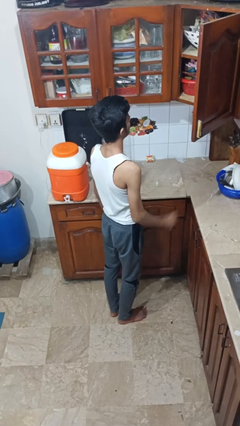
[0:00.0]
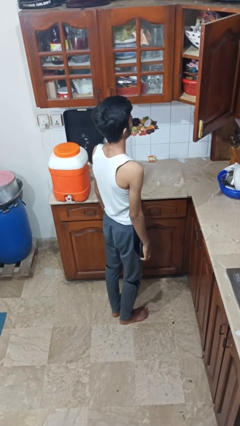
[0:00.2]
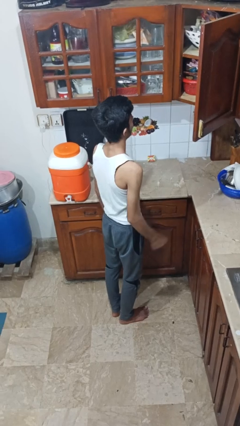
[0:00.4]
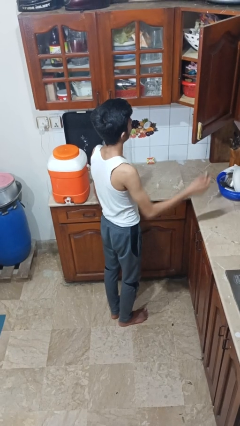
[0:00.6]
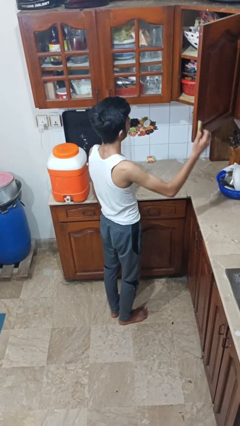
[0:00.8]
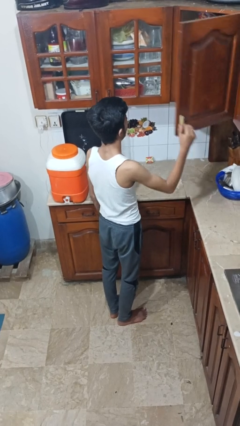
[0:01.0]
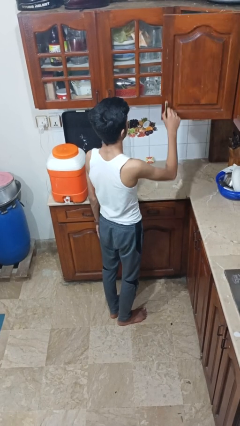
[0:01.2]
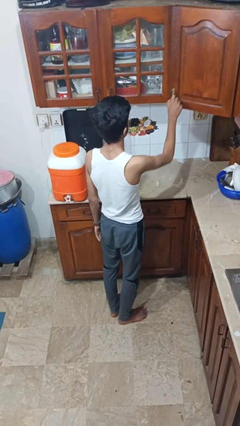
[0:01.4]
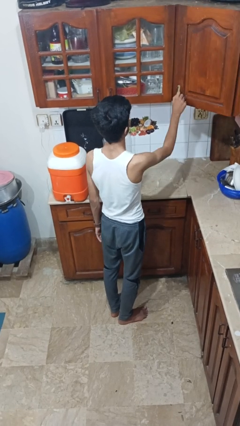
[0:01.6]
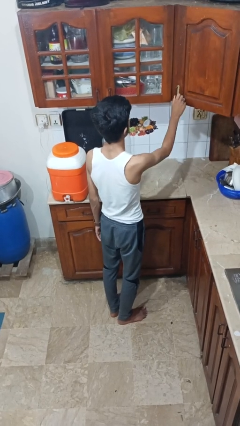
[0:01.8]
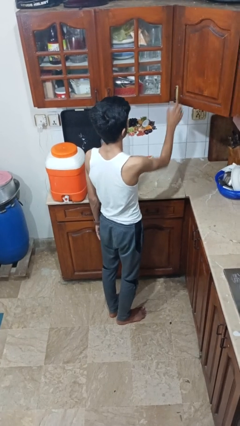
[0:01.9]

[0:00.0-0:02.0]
person closes cabinet

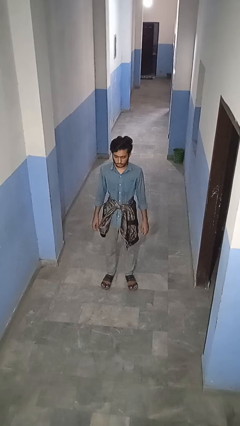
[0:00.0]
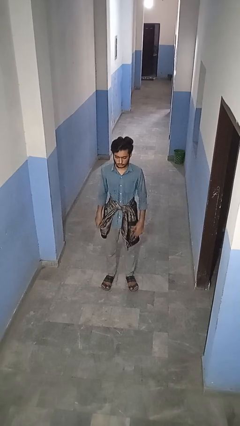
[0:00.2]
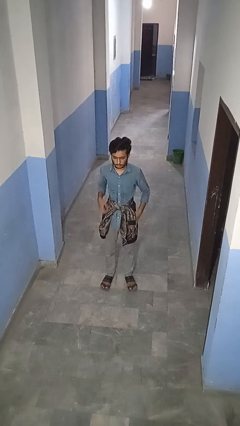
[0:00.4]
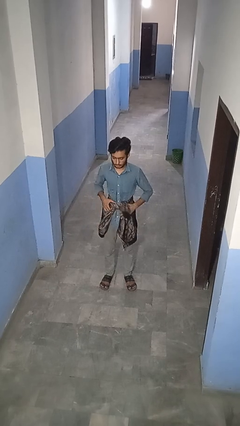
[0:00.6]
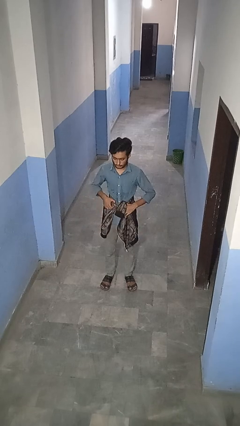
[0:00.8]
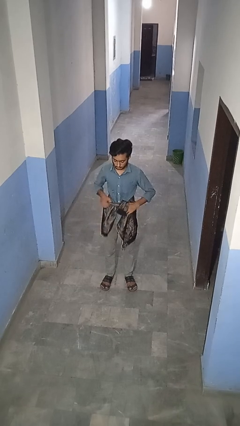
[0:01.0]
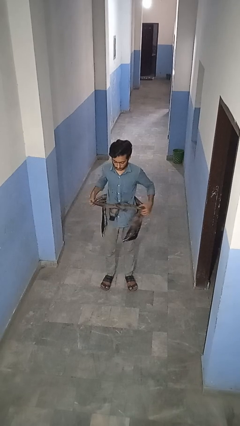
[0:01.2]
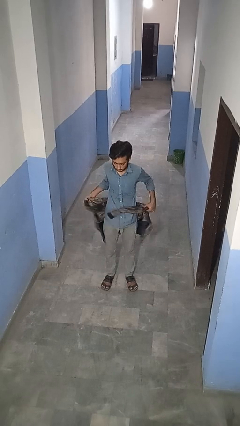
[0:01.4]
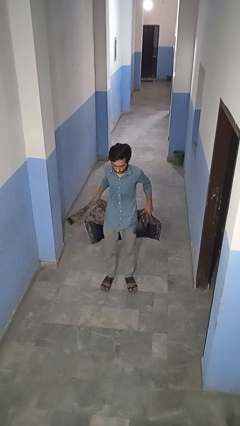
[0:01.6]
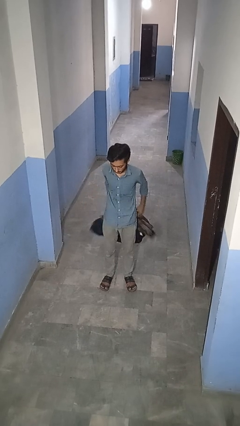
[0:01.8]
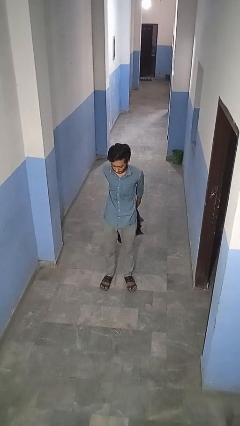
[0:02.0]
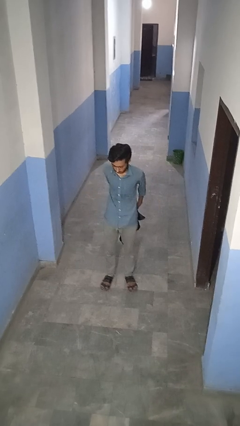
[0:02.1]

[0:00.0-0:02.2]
person unties jacket around waist

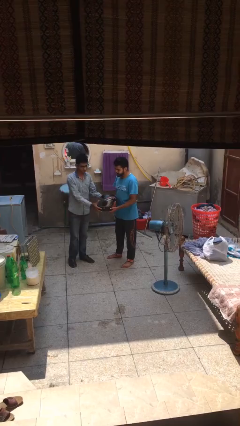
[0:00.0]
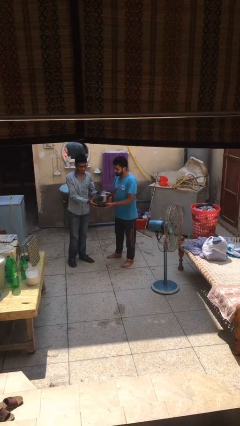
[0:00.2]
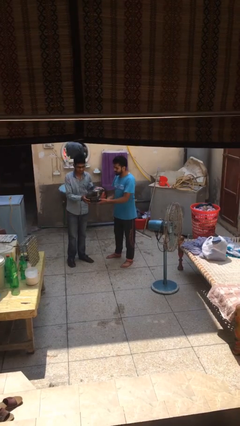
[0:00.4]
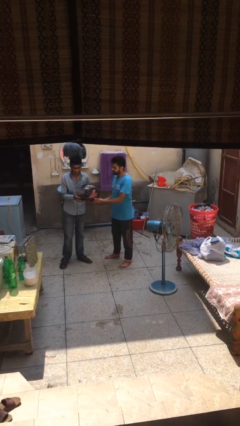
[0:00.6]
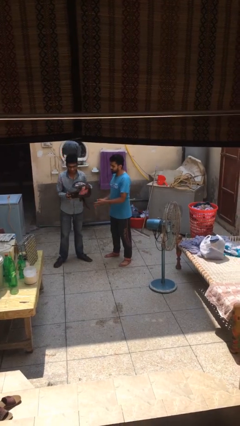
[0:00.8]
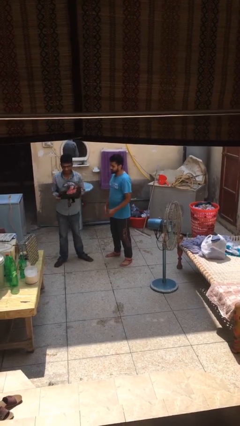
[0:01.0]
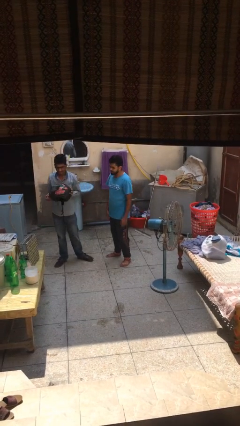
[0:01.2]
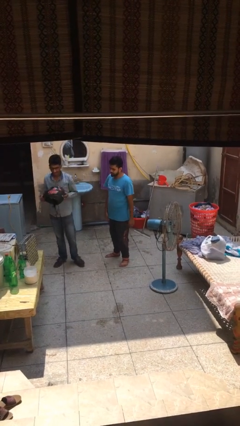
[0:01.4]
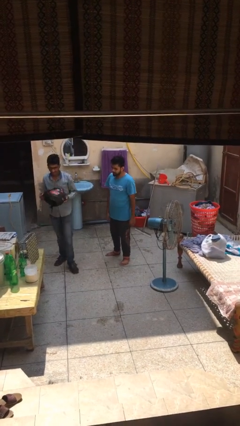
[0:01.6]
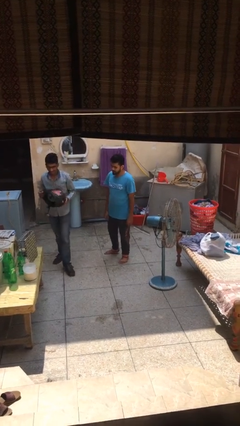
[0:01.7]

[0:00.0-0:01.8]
person transfers object to person

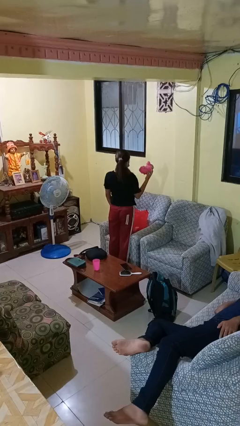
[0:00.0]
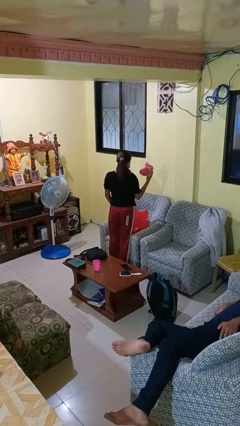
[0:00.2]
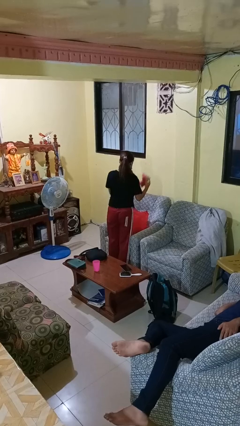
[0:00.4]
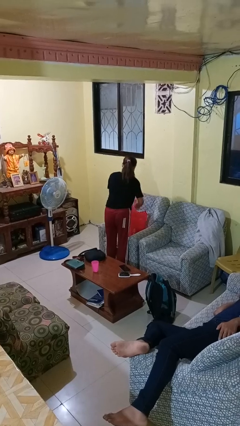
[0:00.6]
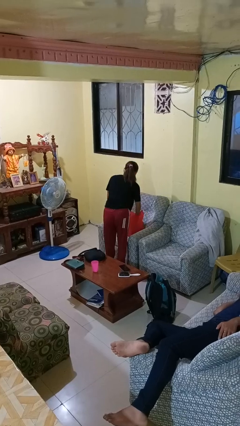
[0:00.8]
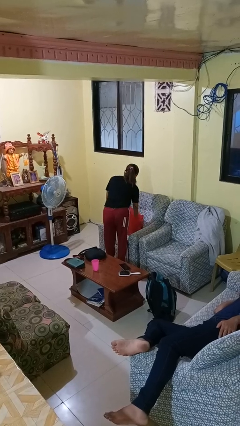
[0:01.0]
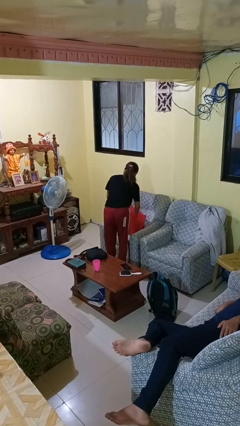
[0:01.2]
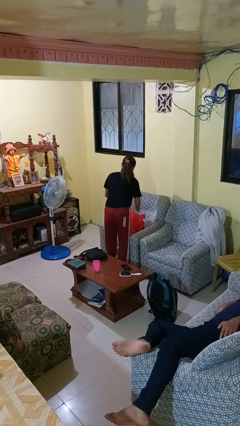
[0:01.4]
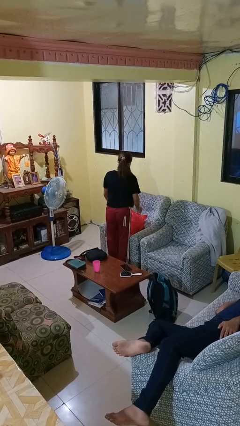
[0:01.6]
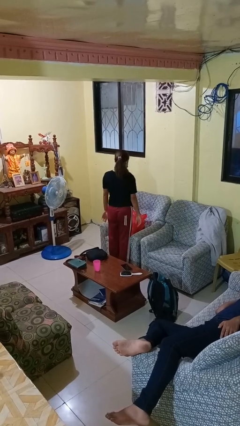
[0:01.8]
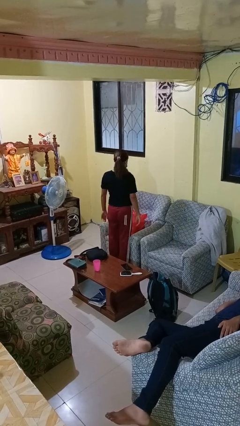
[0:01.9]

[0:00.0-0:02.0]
person puts object into bag

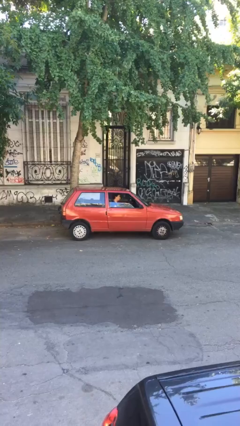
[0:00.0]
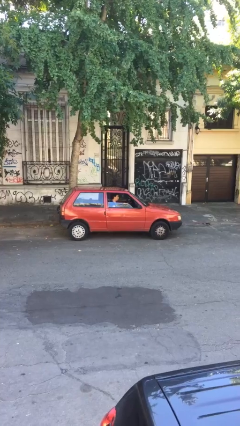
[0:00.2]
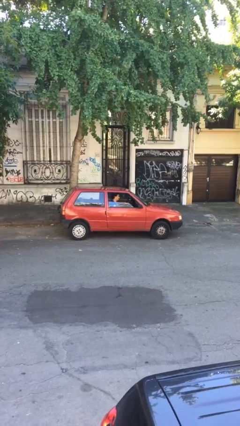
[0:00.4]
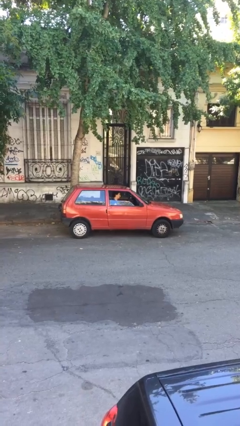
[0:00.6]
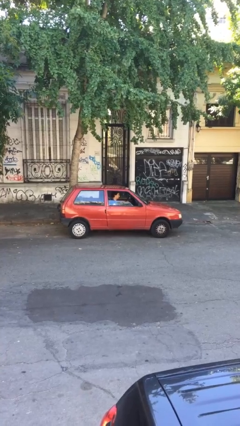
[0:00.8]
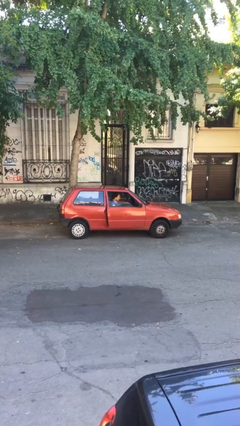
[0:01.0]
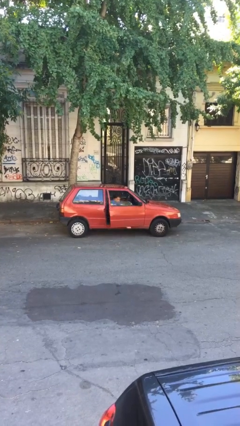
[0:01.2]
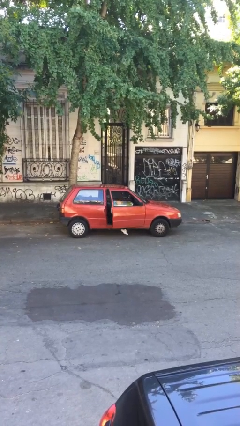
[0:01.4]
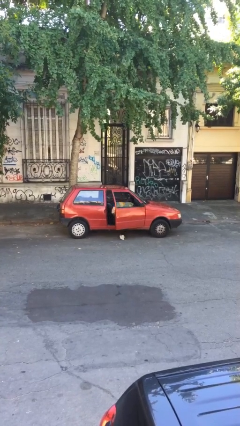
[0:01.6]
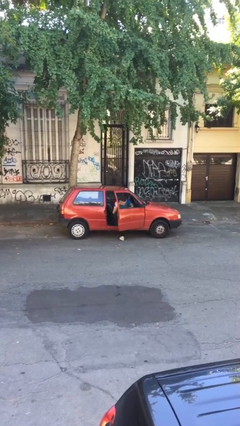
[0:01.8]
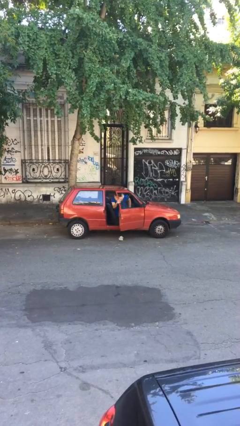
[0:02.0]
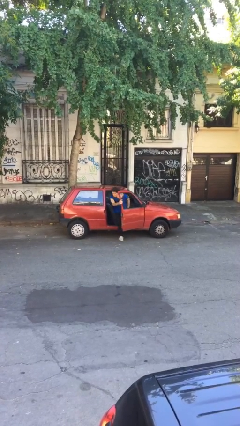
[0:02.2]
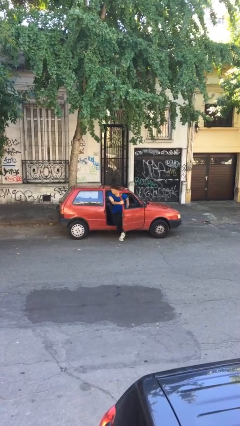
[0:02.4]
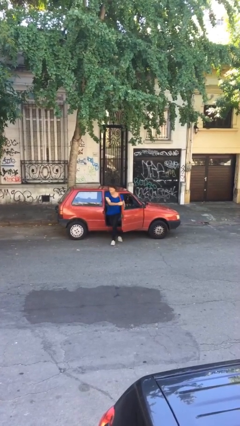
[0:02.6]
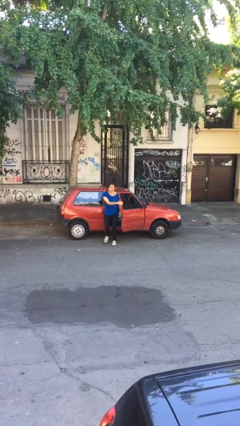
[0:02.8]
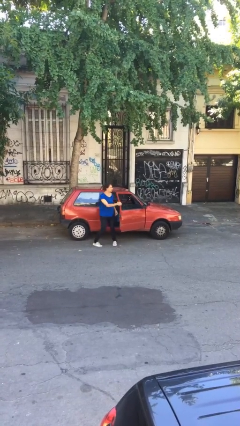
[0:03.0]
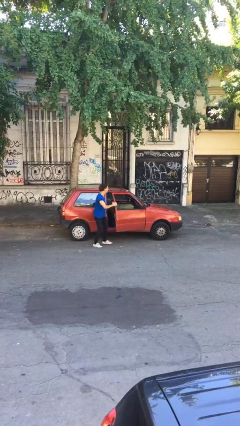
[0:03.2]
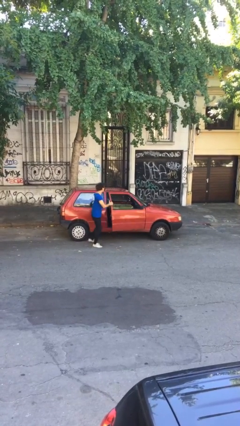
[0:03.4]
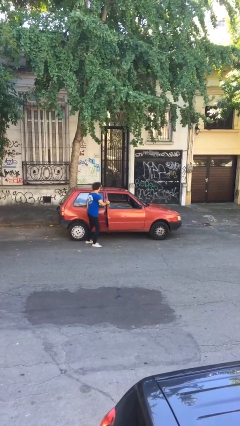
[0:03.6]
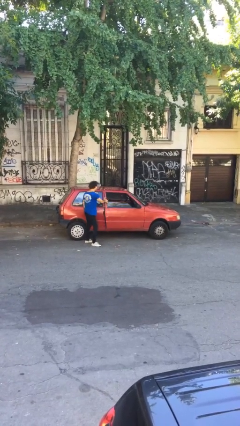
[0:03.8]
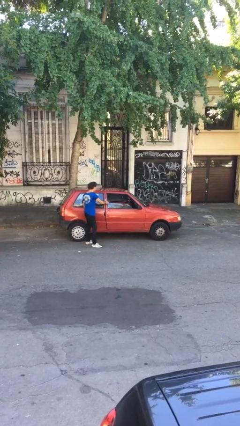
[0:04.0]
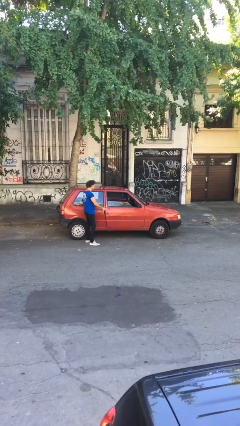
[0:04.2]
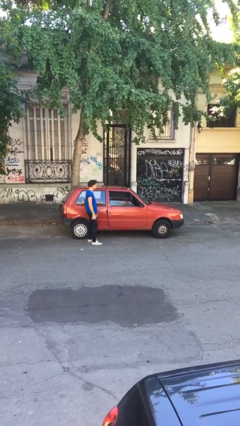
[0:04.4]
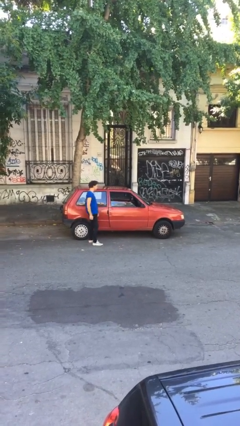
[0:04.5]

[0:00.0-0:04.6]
car drops off person

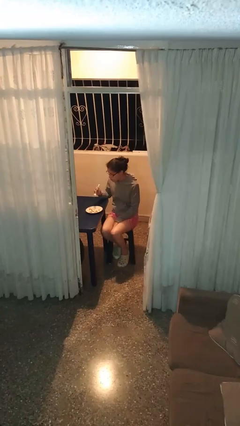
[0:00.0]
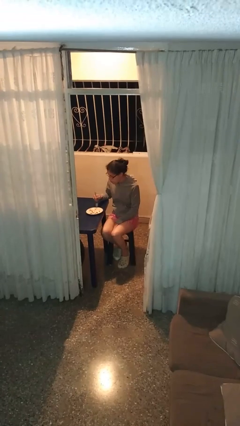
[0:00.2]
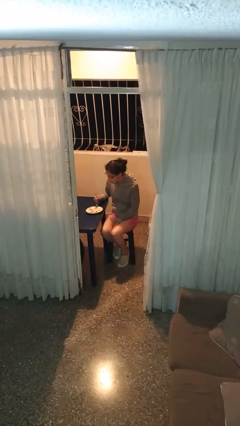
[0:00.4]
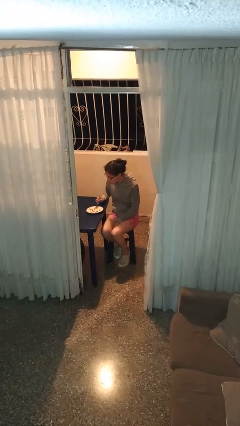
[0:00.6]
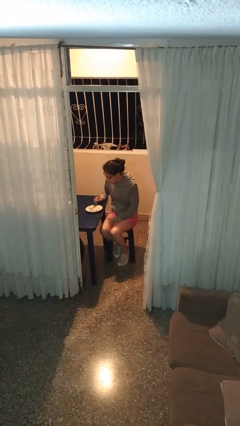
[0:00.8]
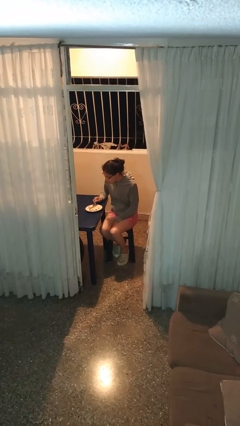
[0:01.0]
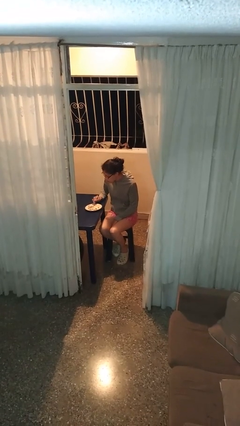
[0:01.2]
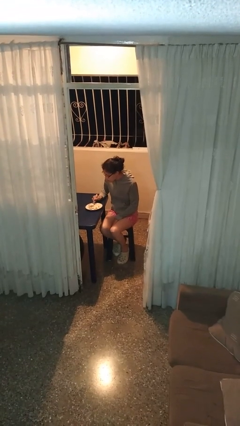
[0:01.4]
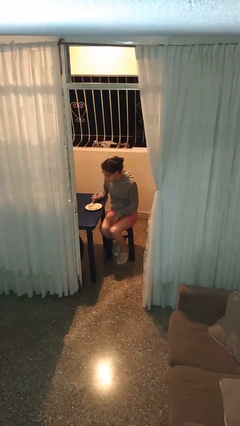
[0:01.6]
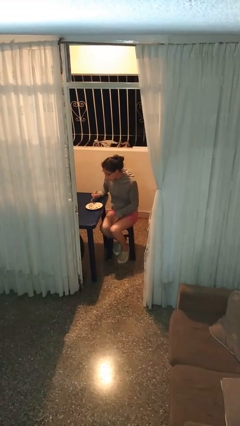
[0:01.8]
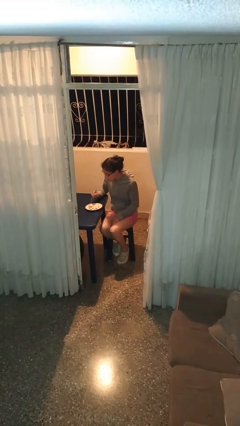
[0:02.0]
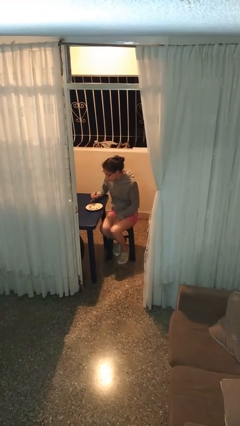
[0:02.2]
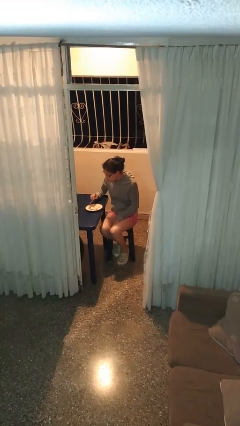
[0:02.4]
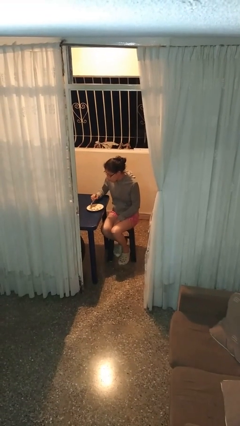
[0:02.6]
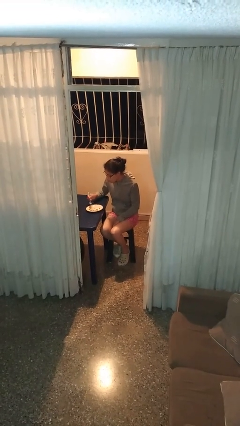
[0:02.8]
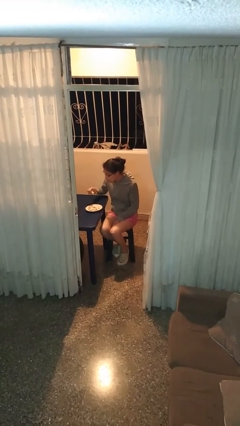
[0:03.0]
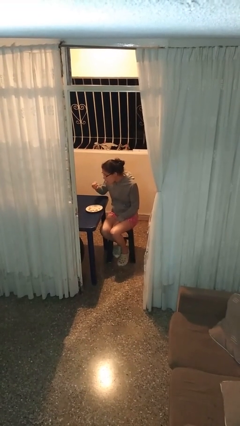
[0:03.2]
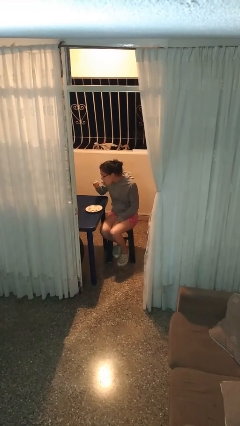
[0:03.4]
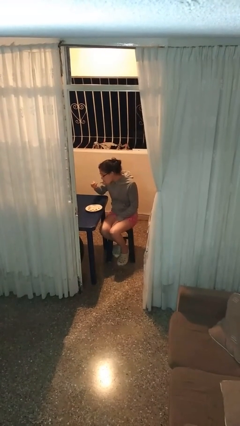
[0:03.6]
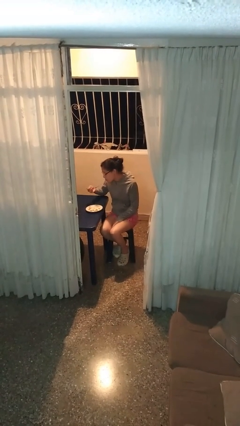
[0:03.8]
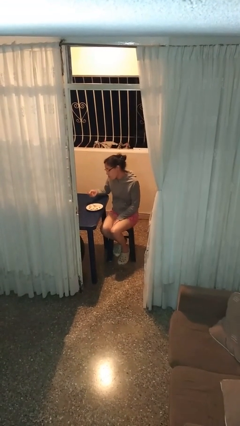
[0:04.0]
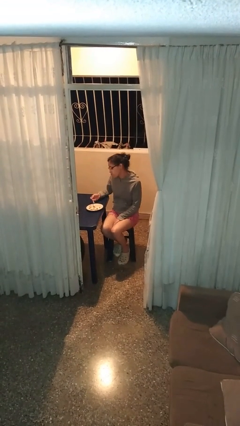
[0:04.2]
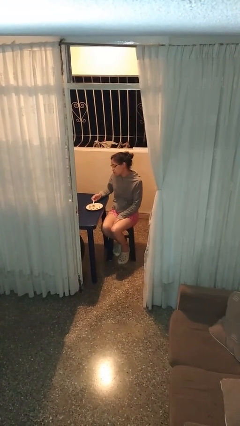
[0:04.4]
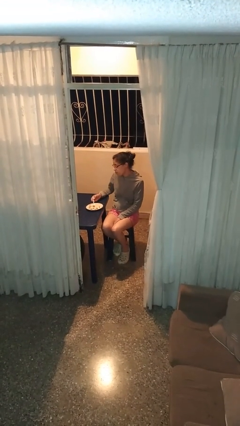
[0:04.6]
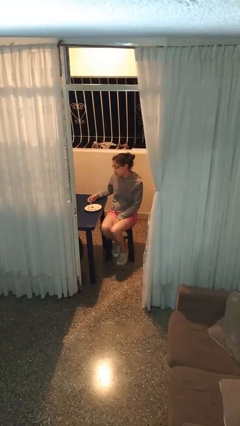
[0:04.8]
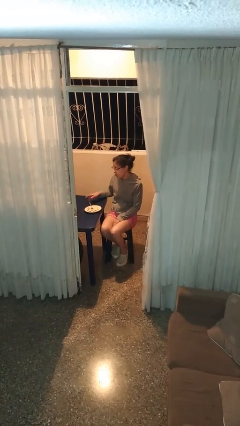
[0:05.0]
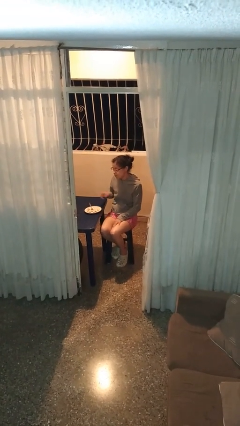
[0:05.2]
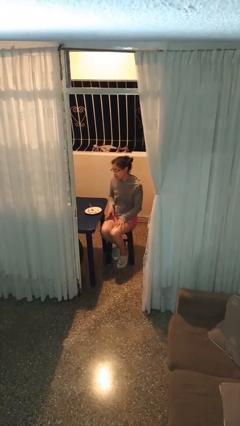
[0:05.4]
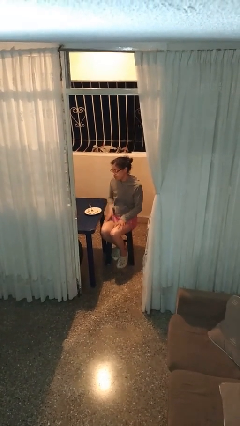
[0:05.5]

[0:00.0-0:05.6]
person eats with utensil
